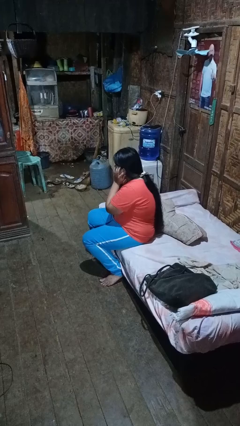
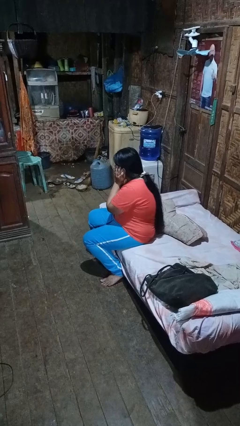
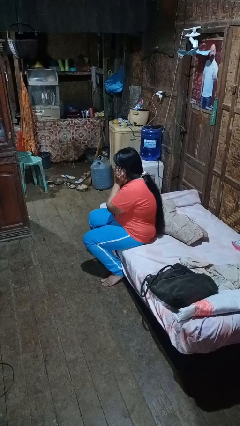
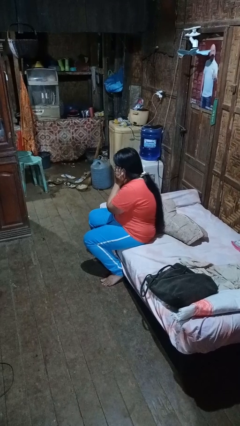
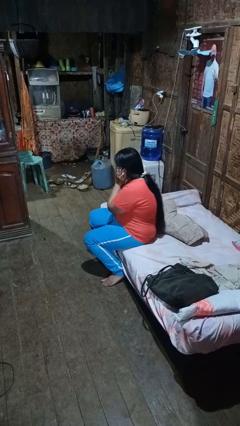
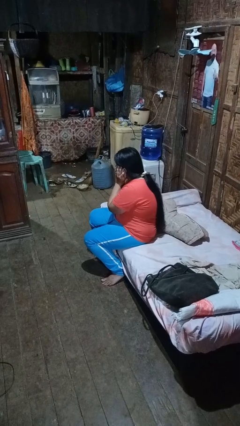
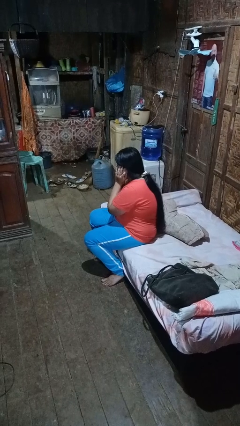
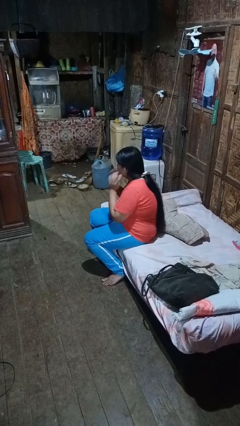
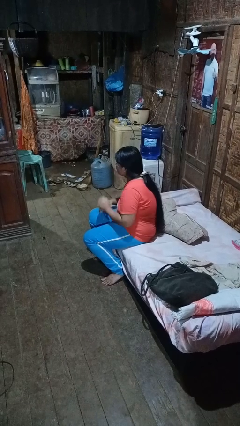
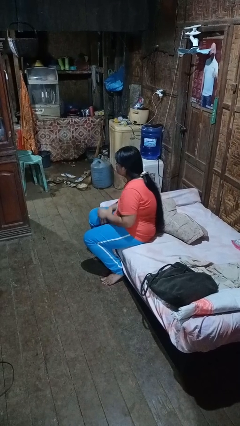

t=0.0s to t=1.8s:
person puts fingers in ear

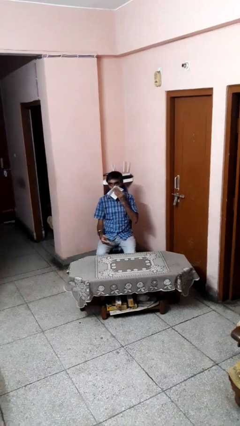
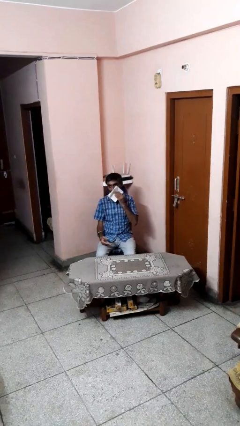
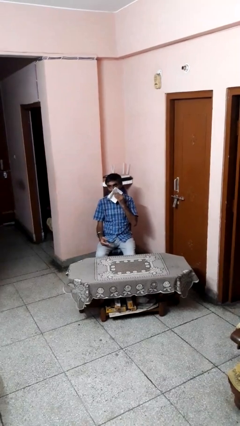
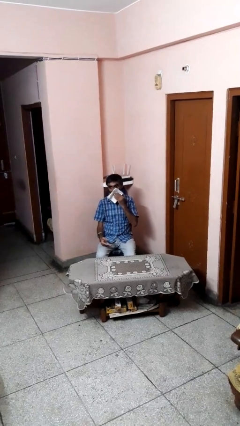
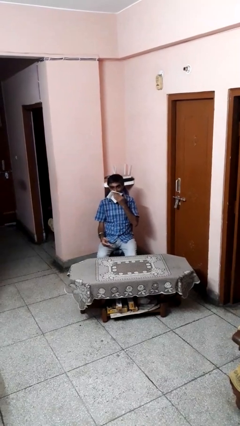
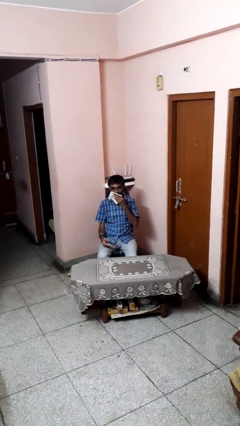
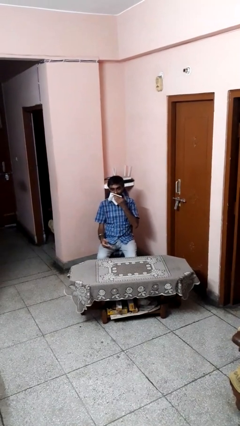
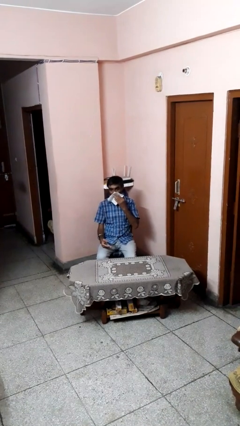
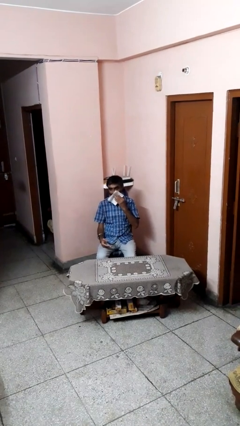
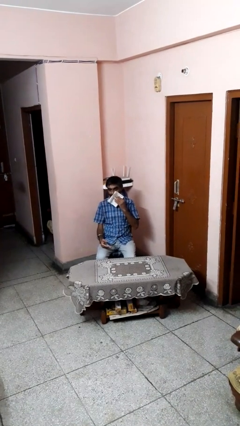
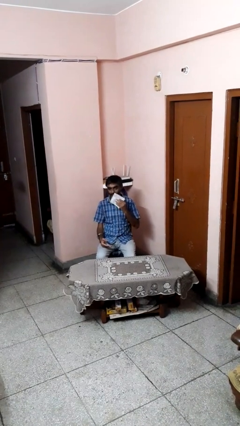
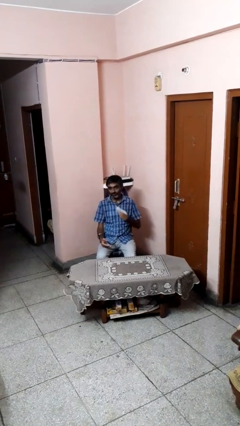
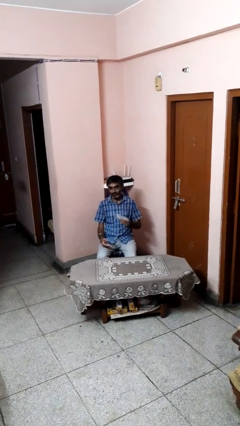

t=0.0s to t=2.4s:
person wipes mouth with napkin

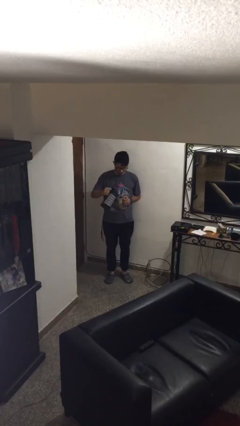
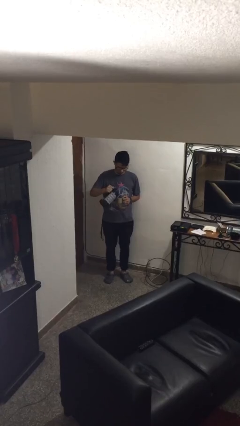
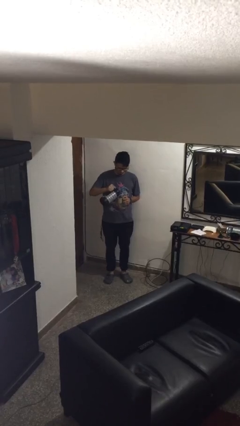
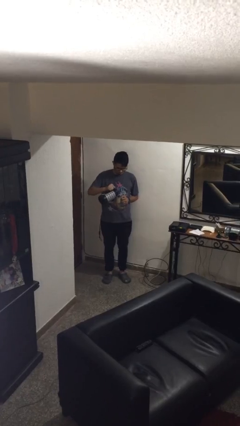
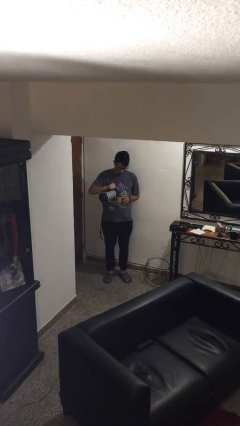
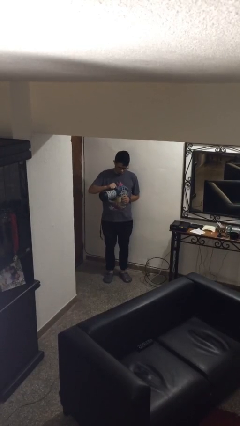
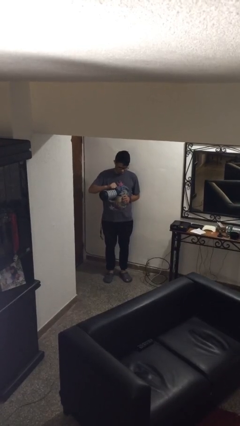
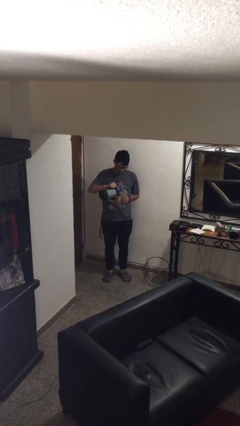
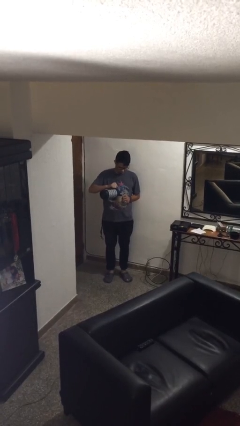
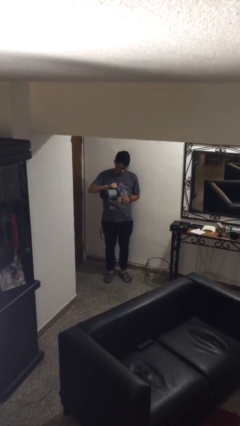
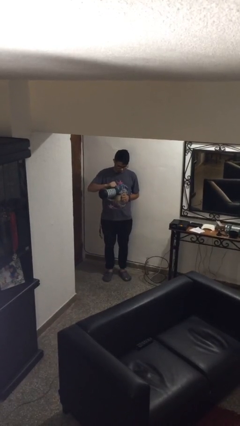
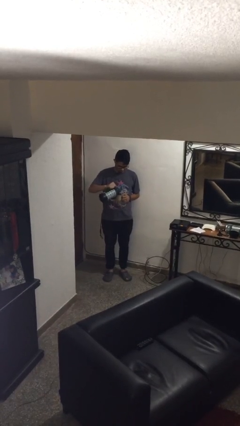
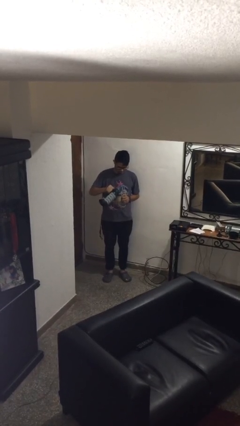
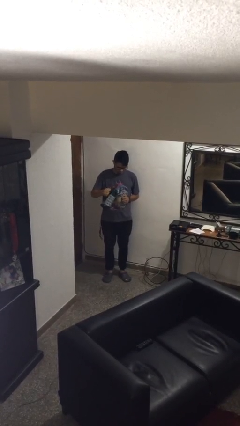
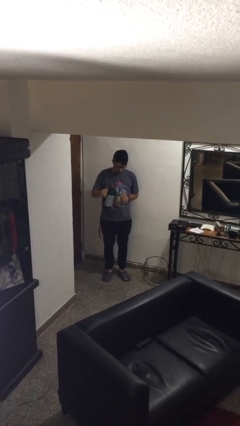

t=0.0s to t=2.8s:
person pours coffee into mug

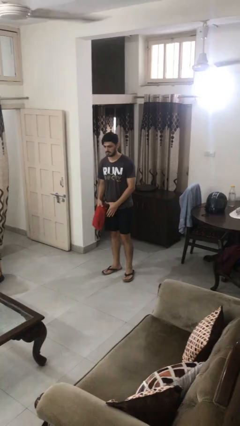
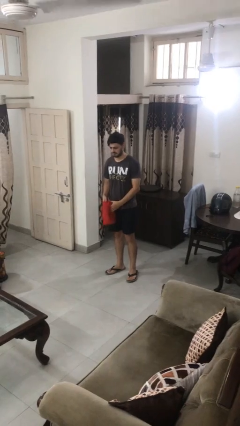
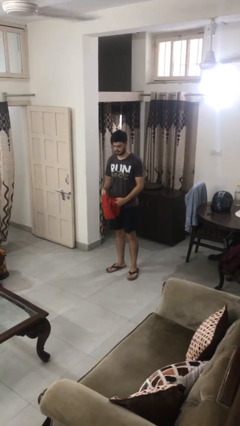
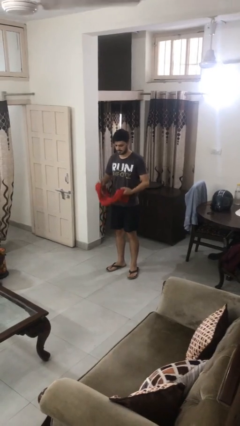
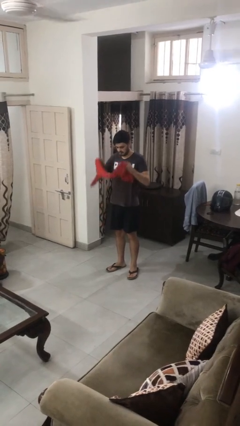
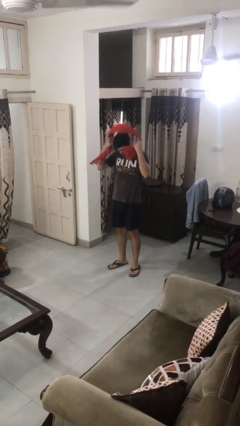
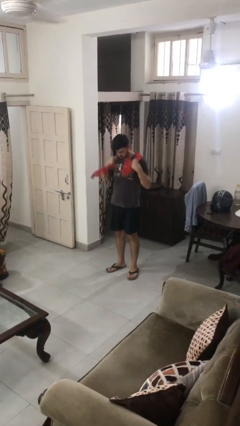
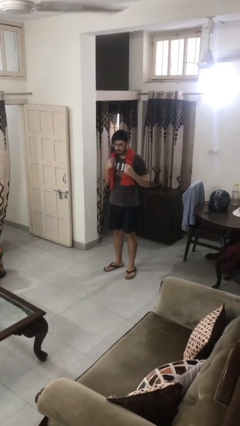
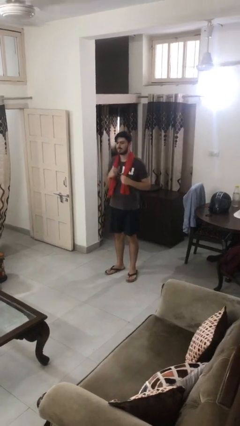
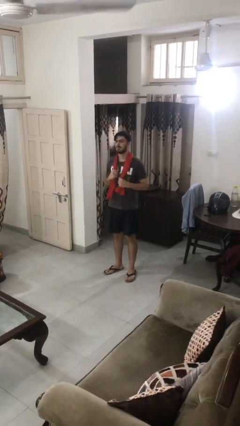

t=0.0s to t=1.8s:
person puts on scarf

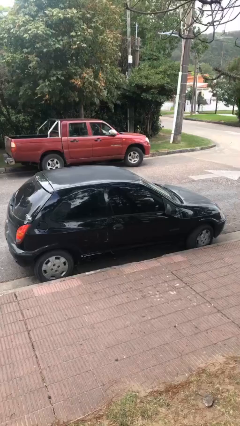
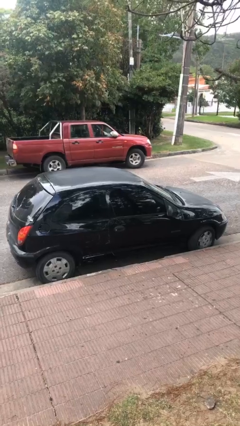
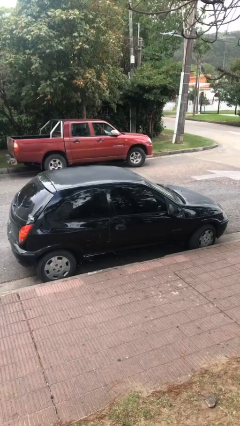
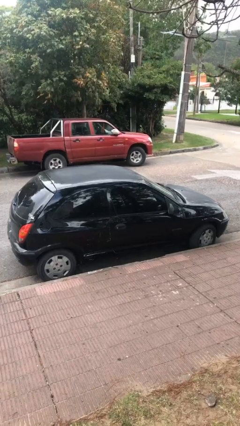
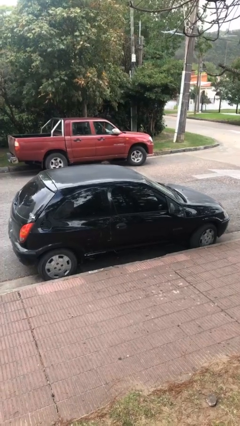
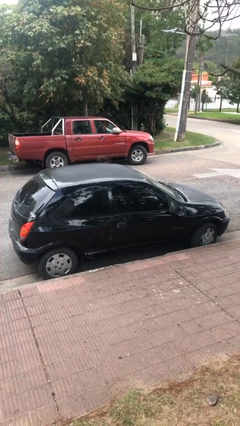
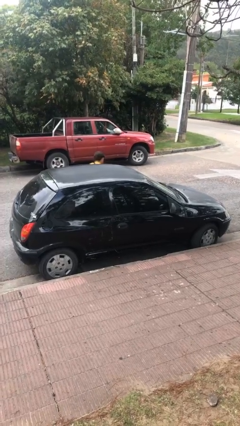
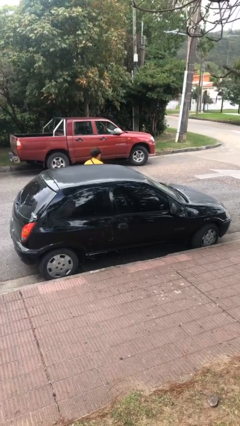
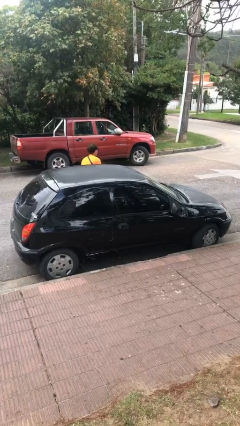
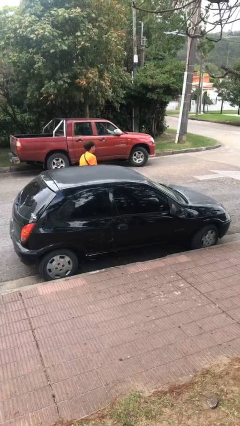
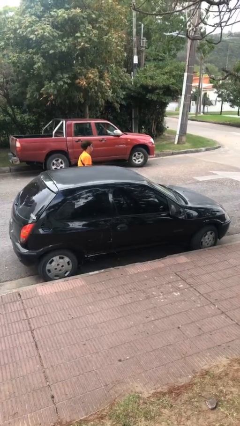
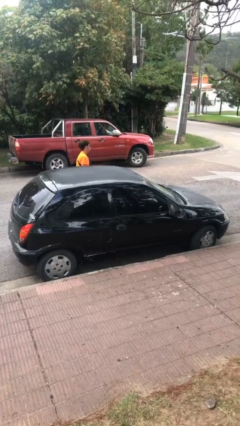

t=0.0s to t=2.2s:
car drops off person

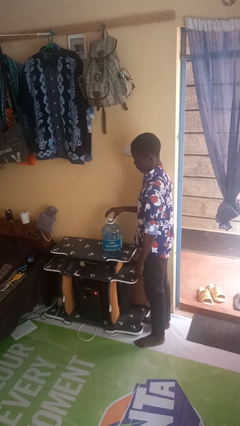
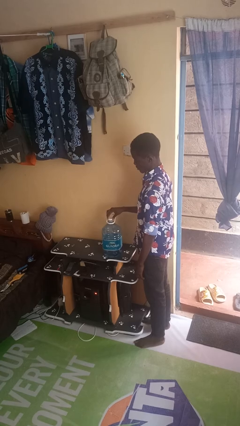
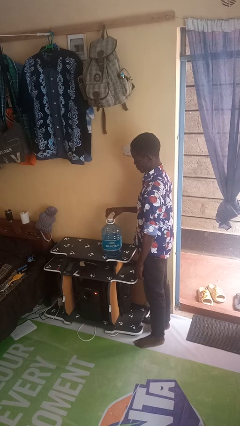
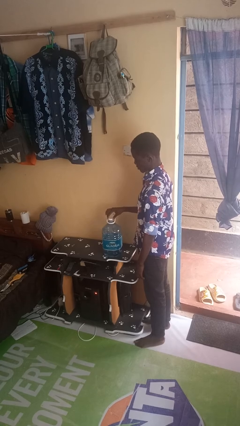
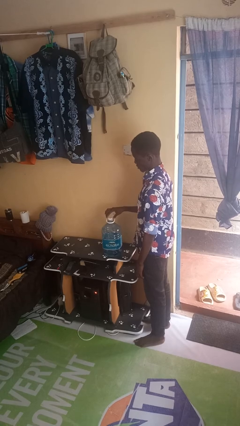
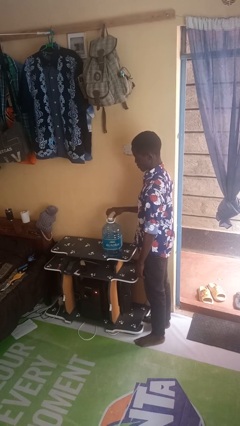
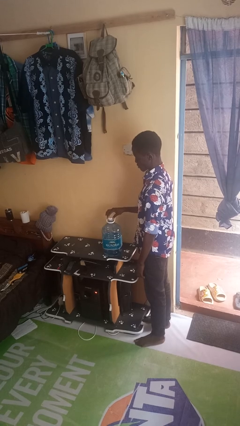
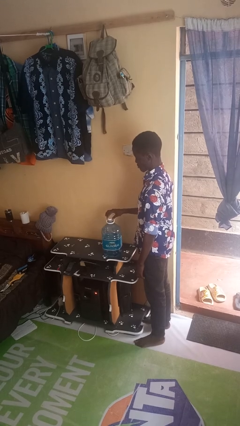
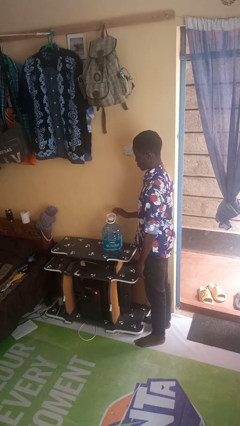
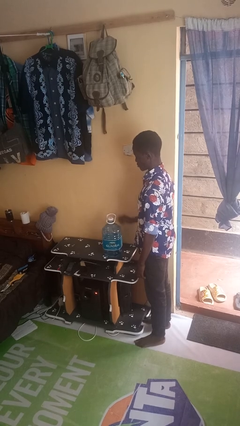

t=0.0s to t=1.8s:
person screws lid to bottle

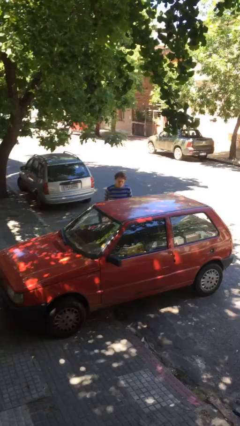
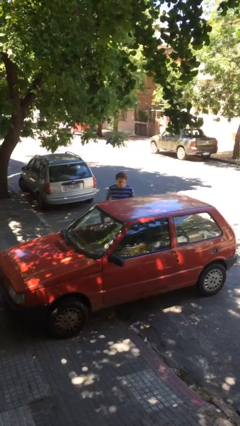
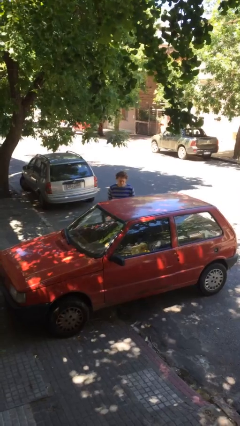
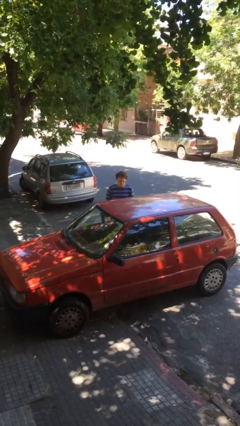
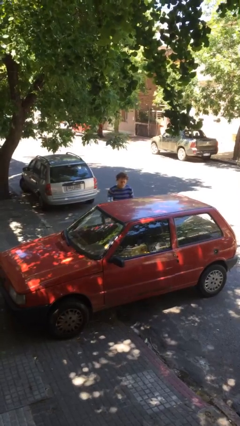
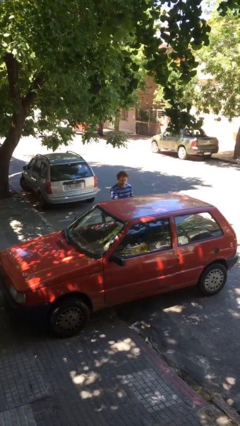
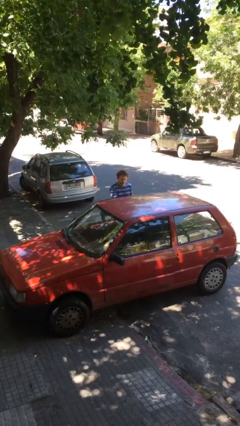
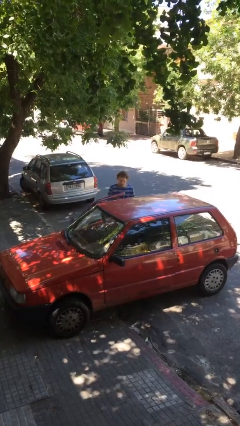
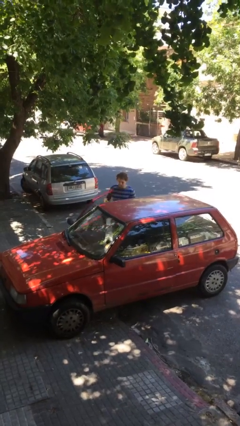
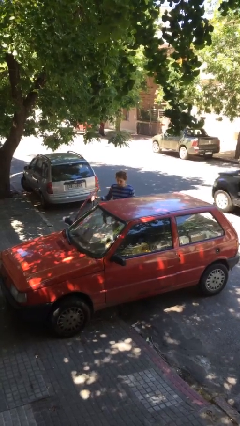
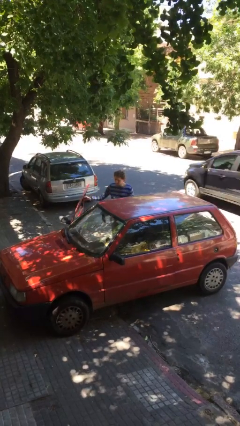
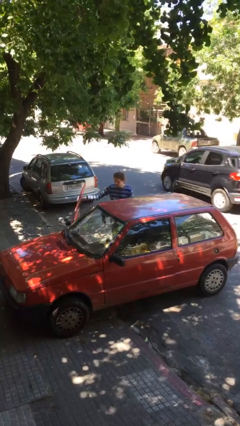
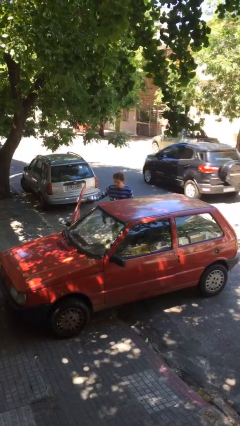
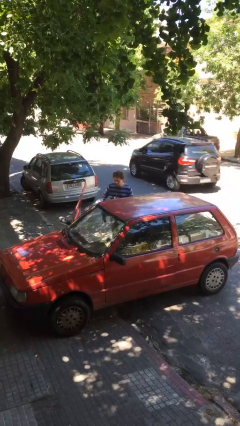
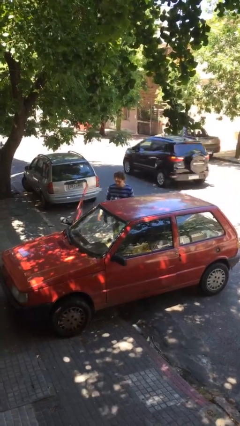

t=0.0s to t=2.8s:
person opens car door

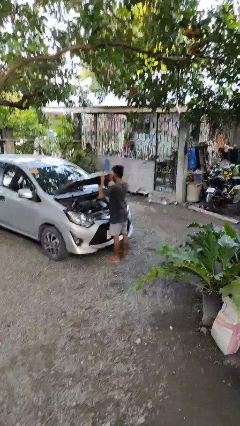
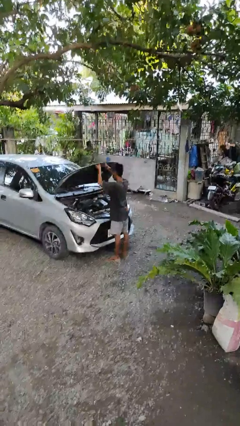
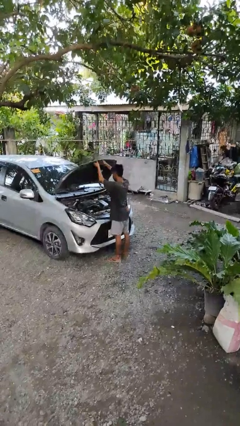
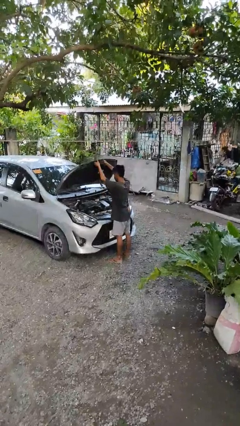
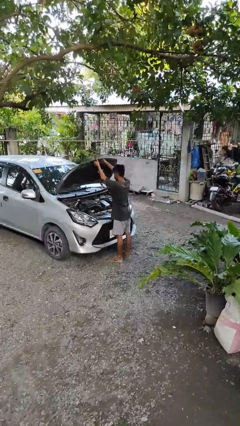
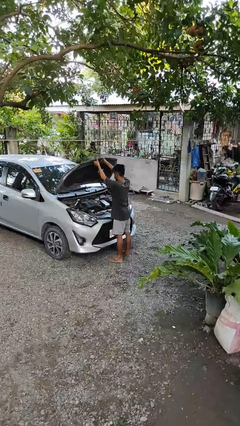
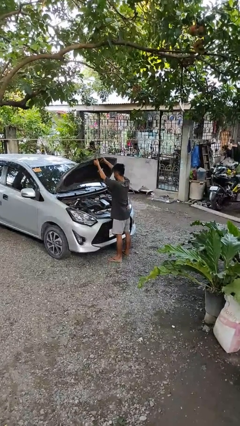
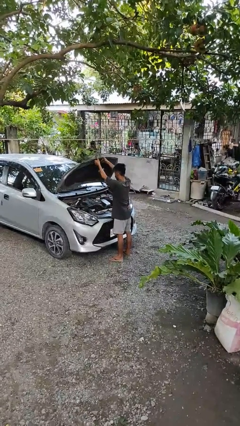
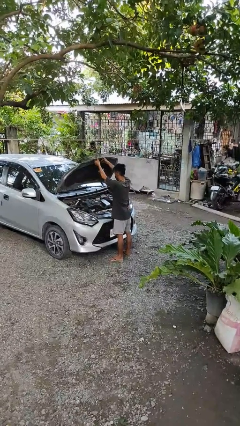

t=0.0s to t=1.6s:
person opens car hood
